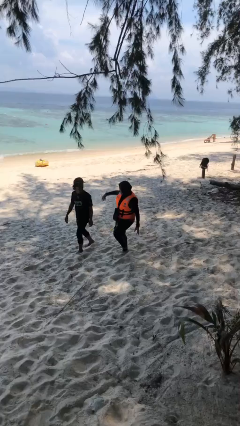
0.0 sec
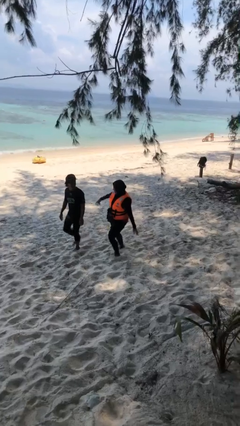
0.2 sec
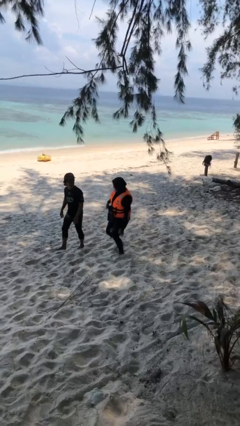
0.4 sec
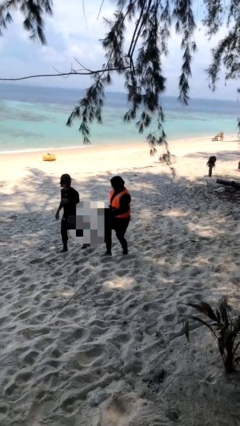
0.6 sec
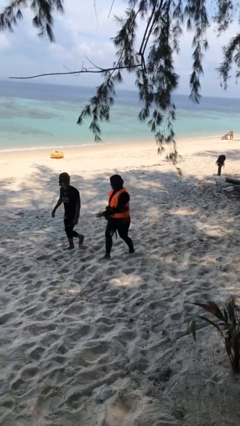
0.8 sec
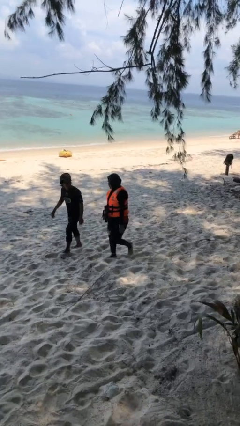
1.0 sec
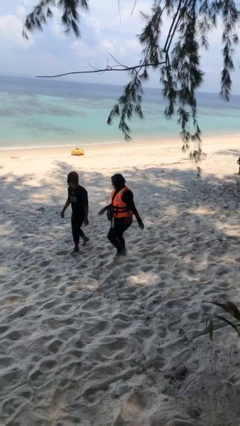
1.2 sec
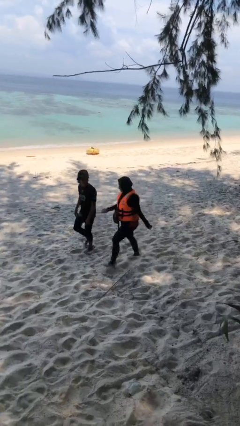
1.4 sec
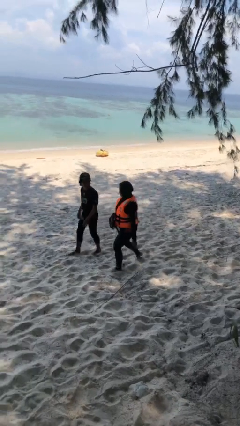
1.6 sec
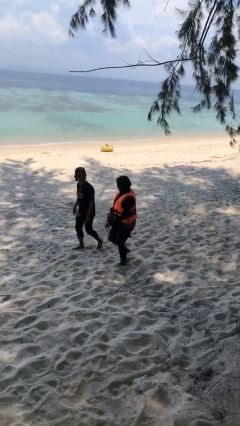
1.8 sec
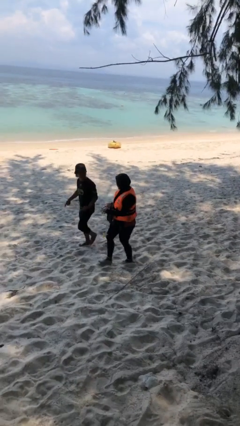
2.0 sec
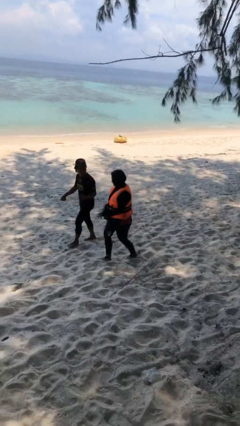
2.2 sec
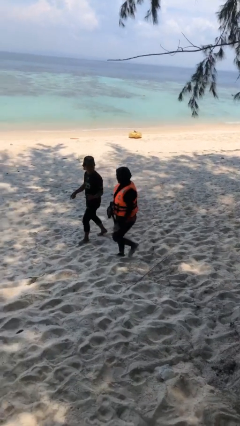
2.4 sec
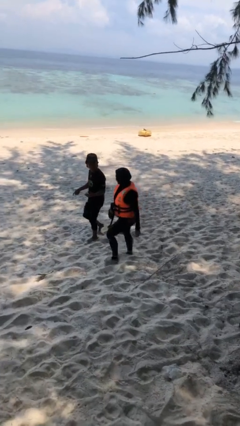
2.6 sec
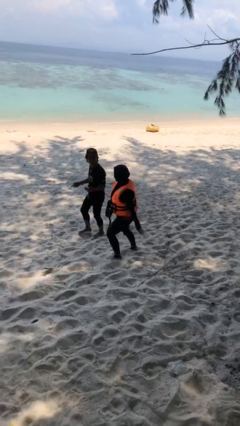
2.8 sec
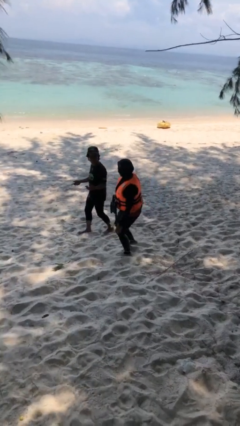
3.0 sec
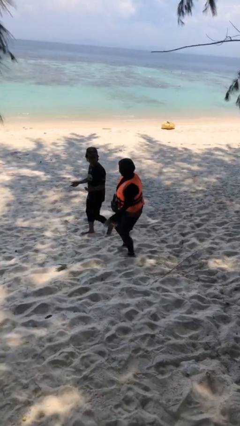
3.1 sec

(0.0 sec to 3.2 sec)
person talks to person

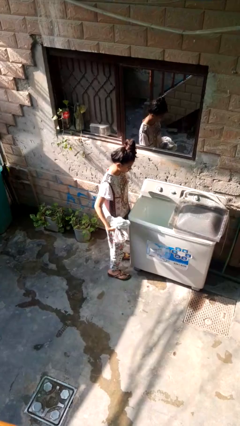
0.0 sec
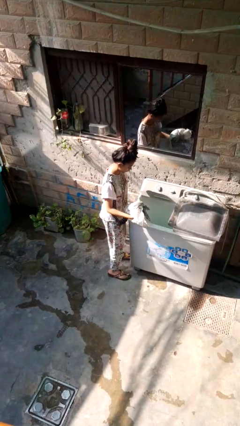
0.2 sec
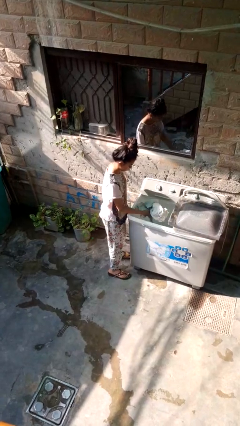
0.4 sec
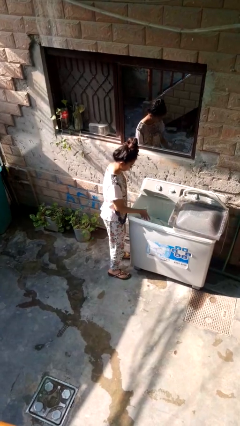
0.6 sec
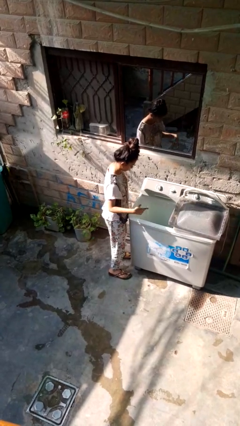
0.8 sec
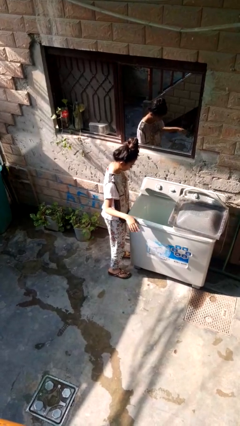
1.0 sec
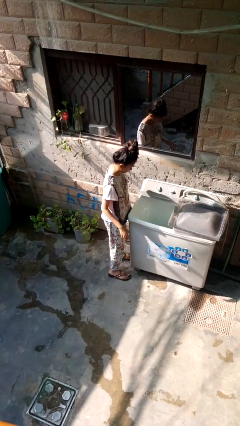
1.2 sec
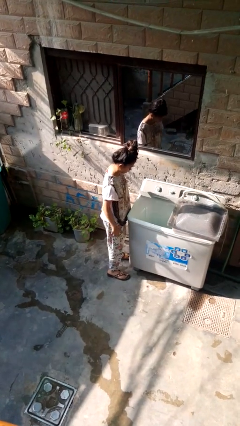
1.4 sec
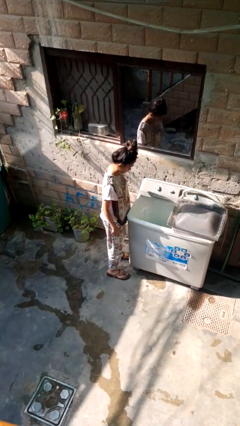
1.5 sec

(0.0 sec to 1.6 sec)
person loads clotheswasher

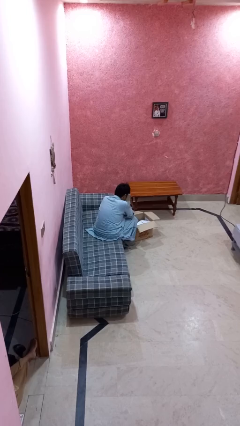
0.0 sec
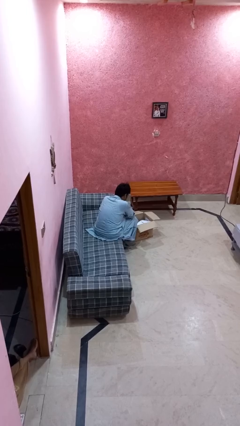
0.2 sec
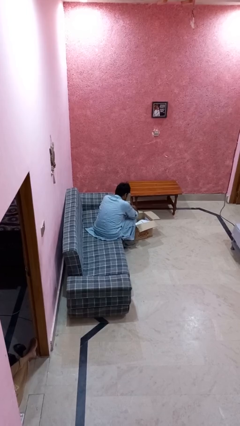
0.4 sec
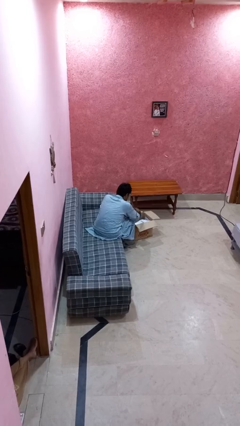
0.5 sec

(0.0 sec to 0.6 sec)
person searches in box

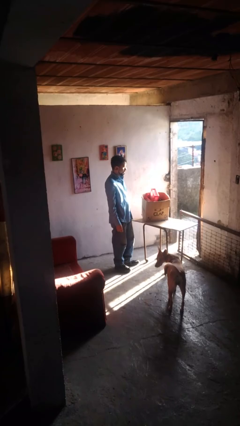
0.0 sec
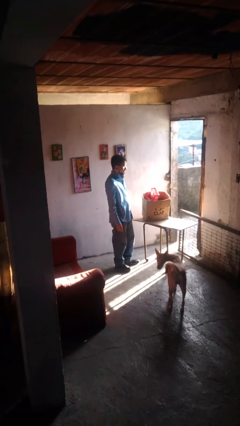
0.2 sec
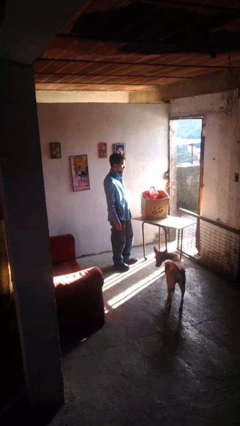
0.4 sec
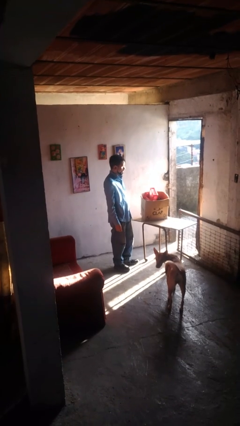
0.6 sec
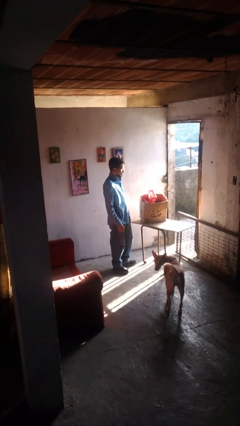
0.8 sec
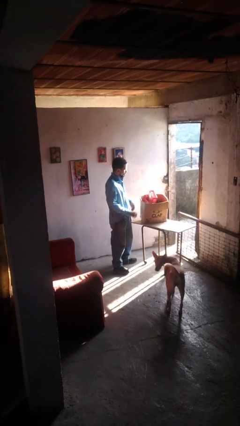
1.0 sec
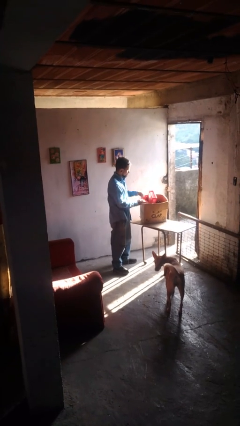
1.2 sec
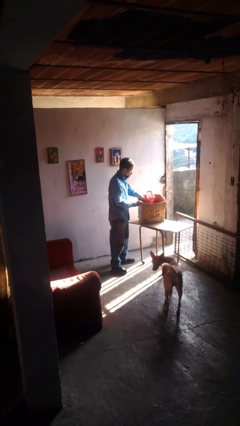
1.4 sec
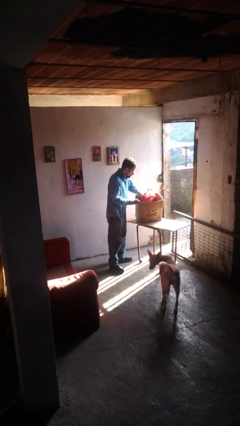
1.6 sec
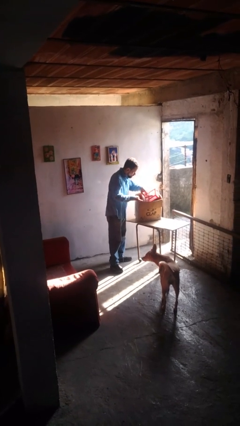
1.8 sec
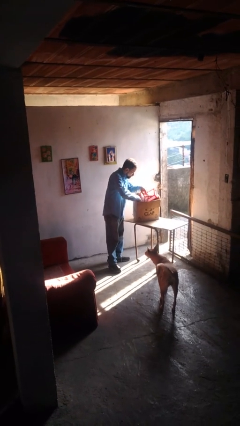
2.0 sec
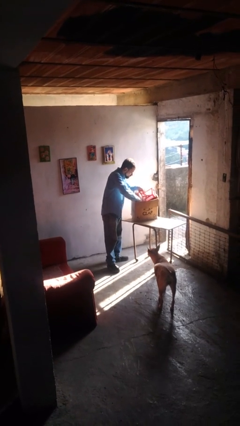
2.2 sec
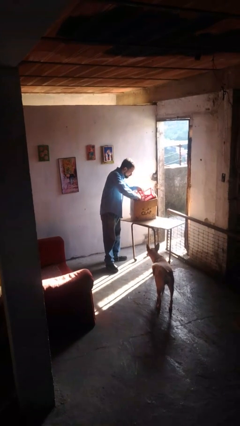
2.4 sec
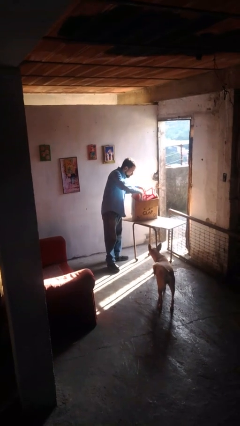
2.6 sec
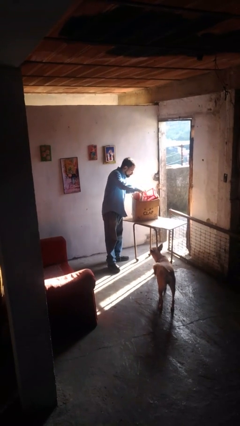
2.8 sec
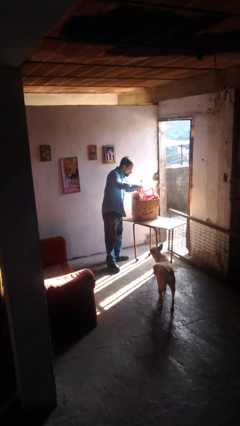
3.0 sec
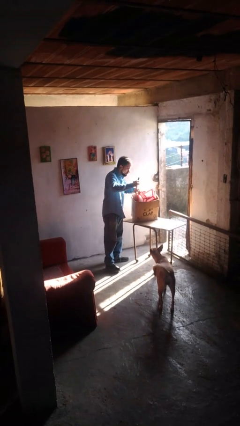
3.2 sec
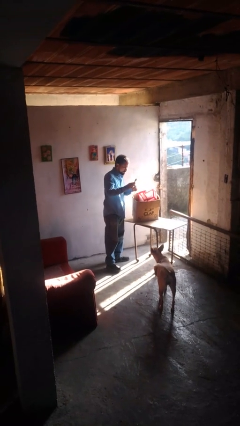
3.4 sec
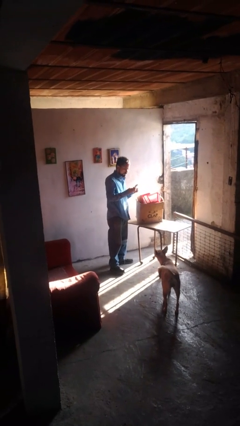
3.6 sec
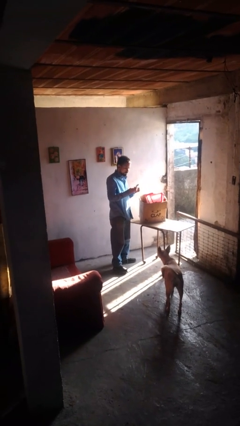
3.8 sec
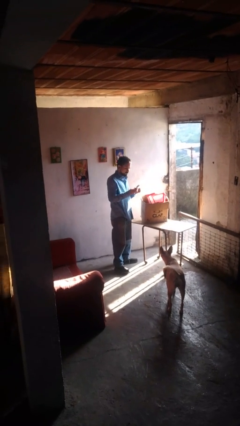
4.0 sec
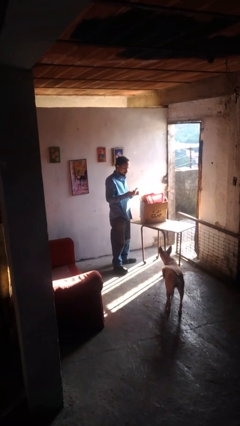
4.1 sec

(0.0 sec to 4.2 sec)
person takes object from box

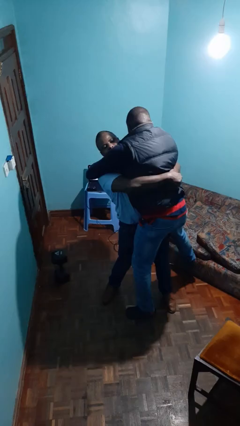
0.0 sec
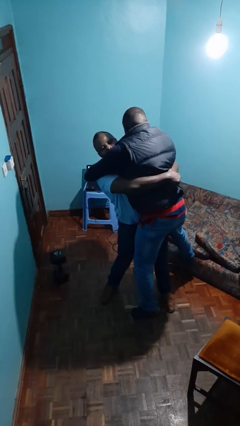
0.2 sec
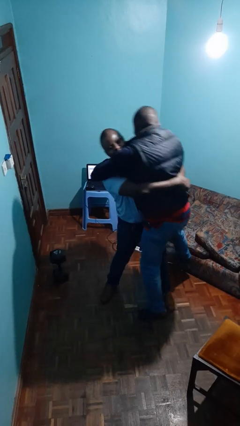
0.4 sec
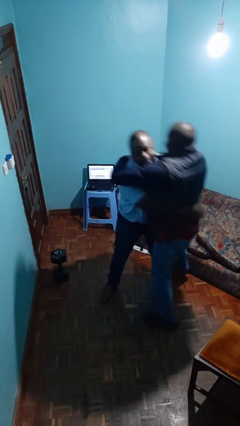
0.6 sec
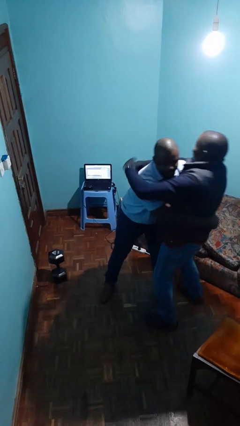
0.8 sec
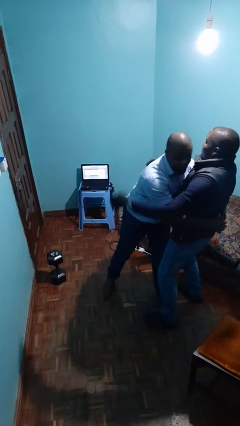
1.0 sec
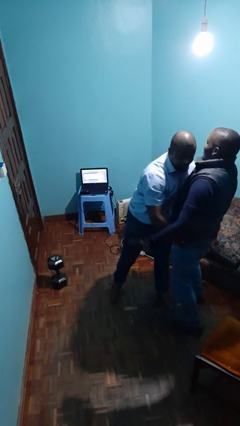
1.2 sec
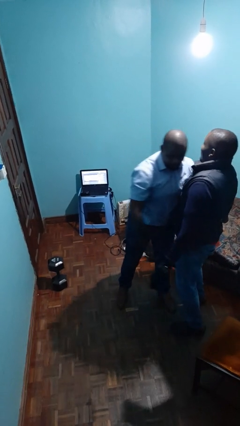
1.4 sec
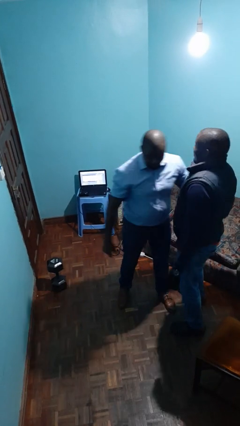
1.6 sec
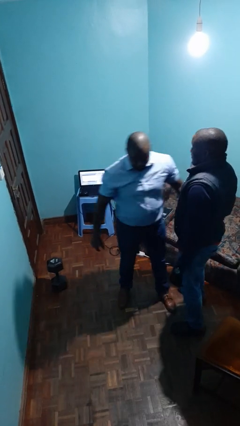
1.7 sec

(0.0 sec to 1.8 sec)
person puts down person

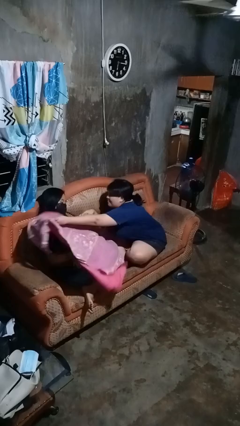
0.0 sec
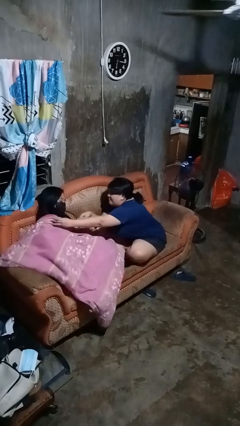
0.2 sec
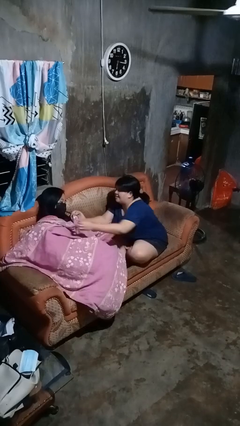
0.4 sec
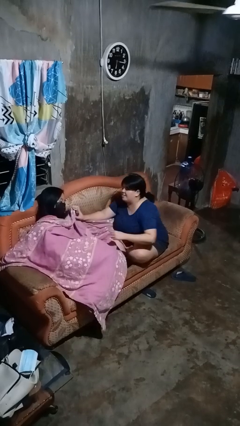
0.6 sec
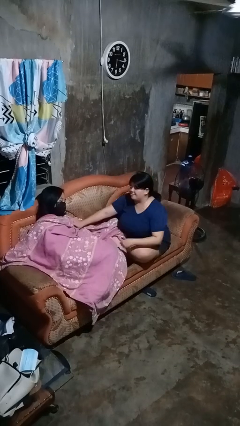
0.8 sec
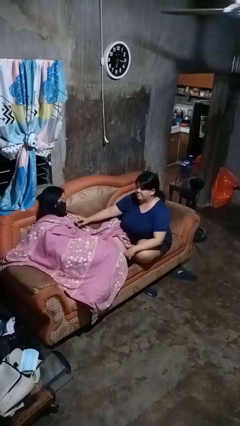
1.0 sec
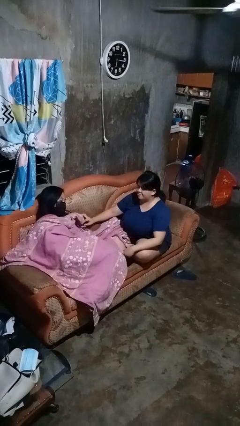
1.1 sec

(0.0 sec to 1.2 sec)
person covers friend with blanket

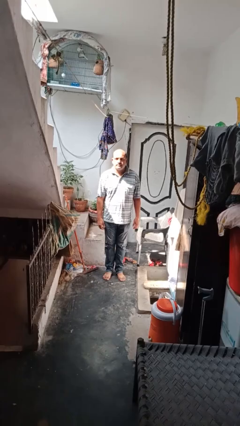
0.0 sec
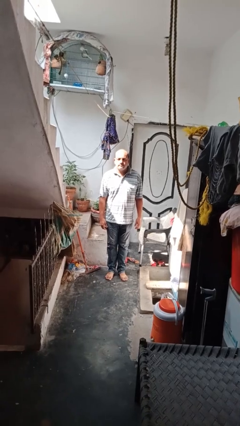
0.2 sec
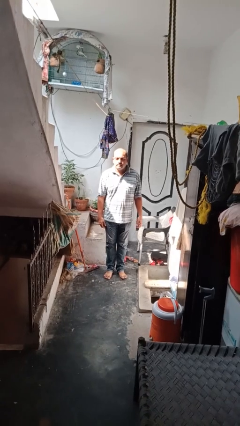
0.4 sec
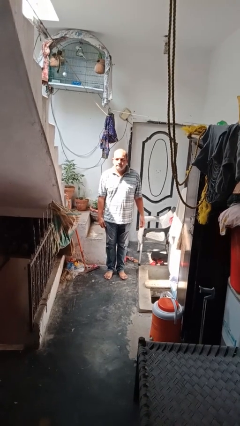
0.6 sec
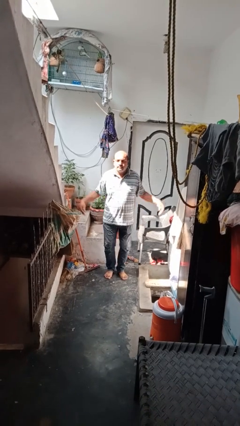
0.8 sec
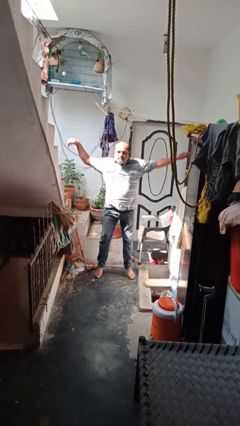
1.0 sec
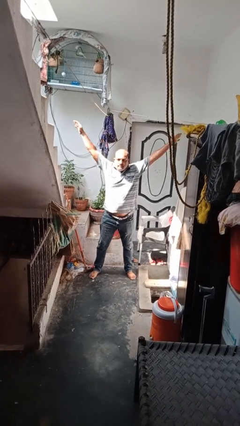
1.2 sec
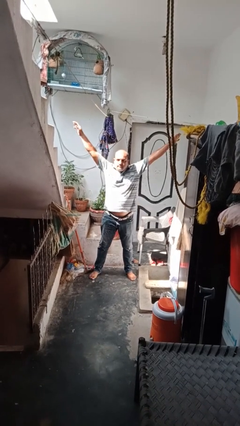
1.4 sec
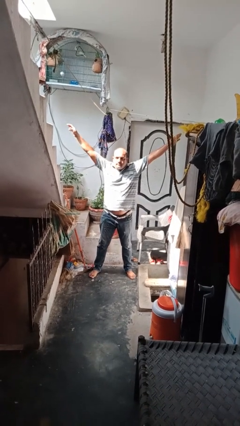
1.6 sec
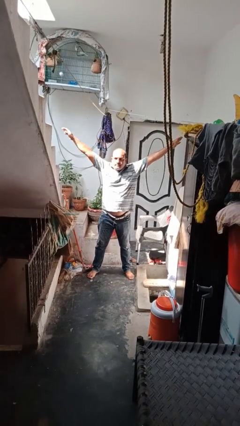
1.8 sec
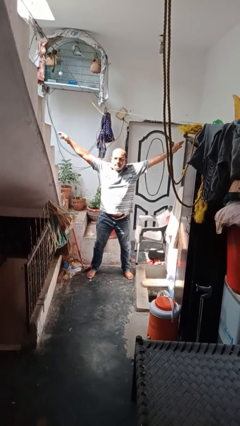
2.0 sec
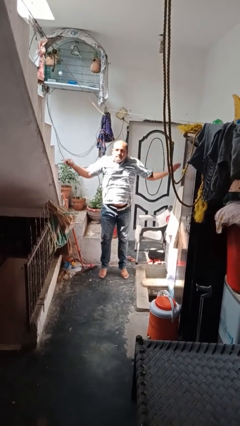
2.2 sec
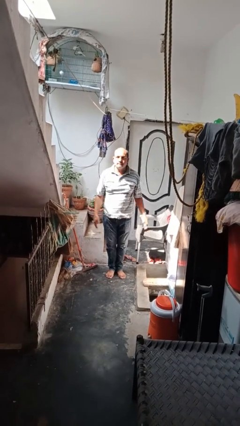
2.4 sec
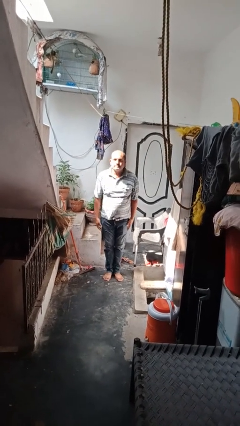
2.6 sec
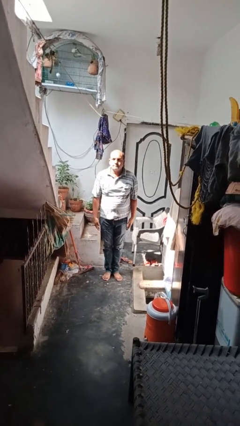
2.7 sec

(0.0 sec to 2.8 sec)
person exercises with jumping jacks

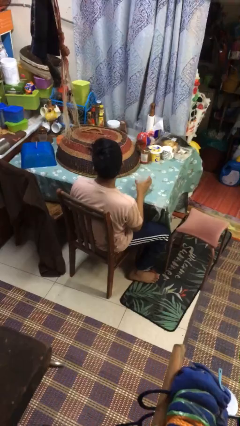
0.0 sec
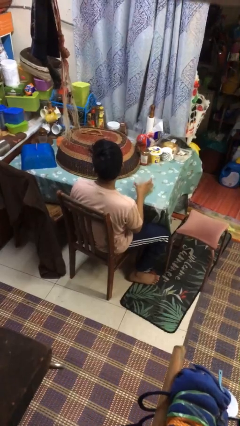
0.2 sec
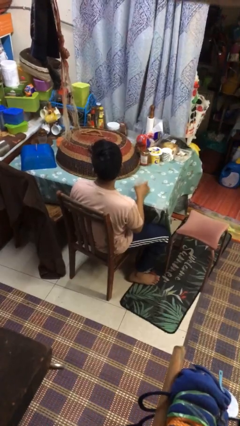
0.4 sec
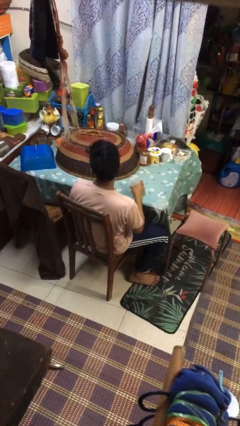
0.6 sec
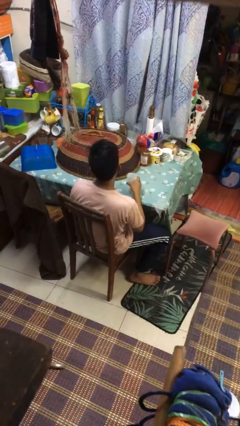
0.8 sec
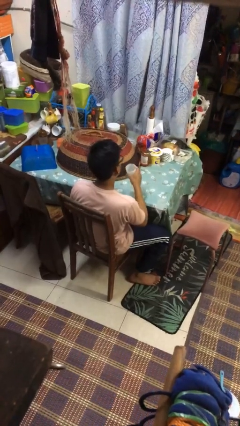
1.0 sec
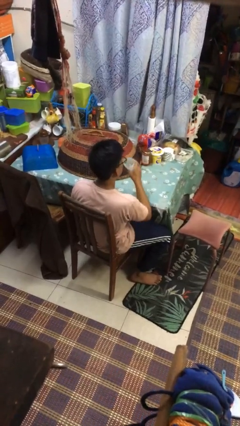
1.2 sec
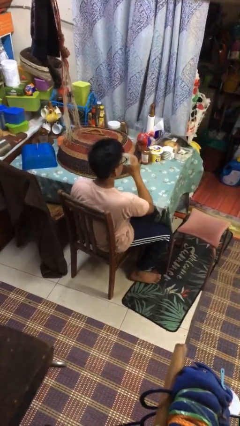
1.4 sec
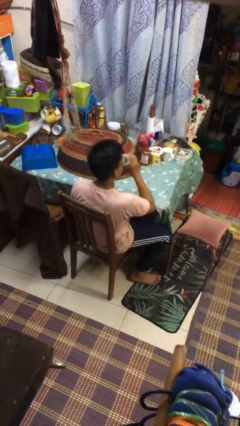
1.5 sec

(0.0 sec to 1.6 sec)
person picks up object from table
